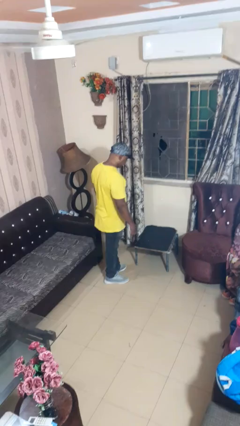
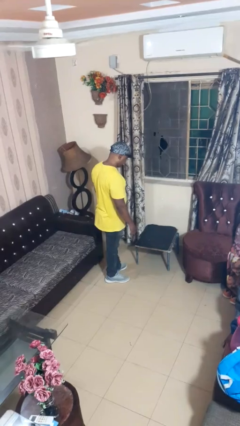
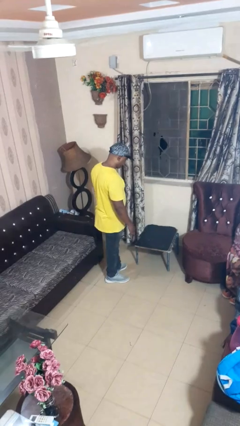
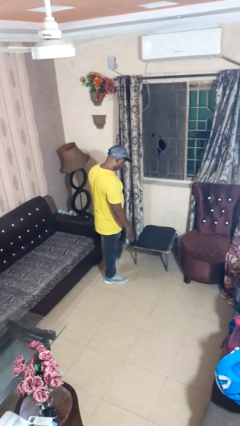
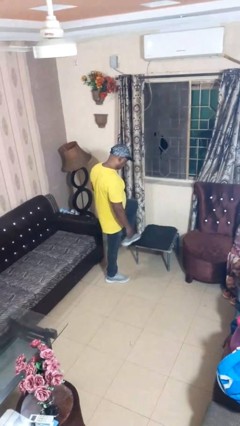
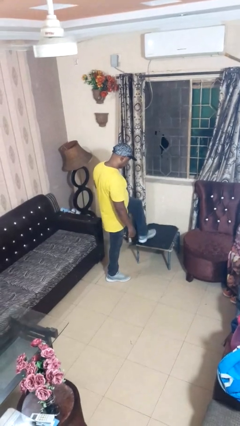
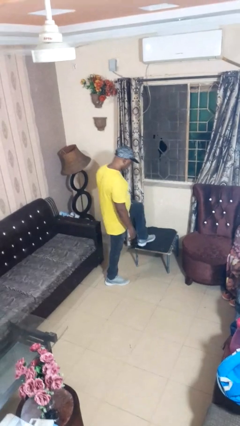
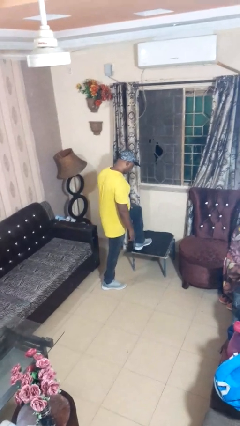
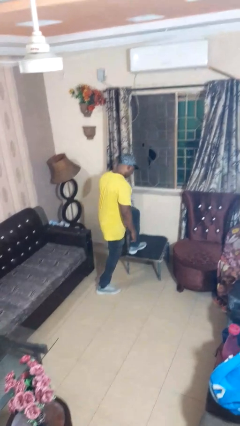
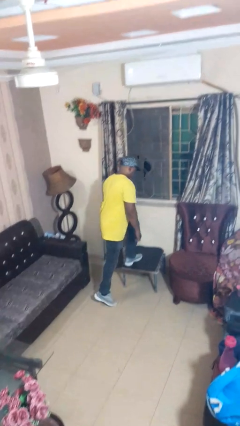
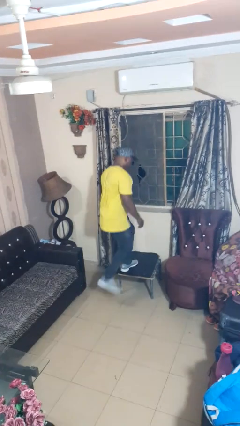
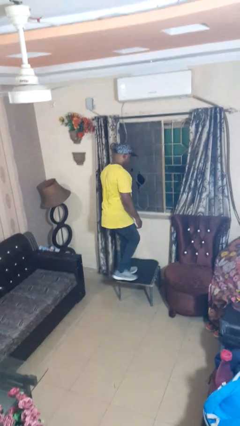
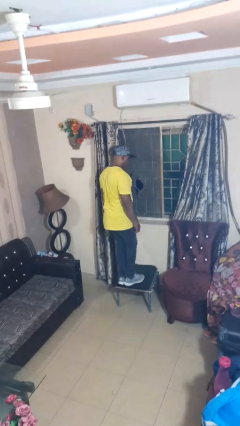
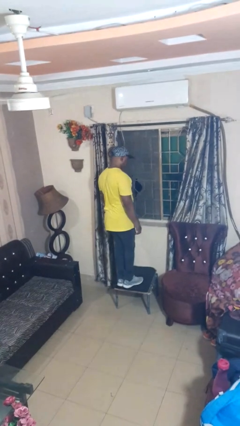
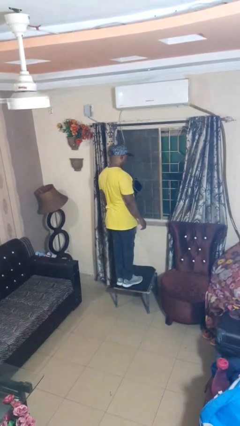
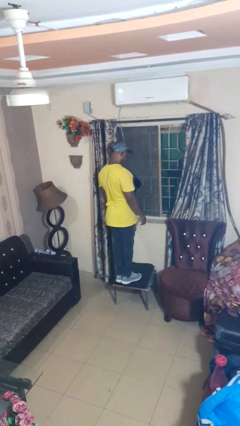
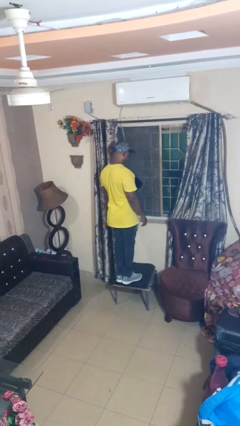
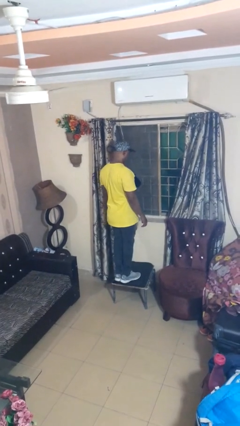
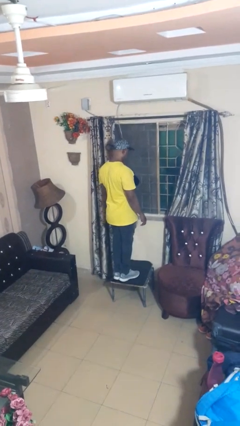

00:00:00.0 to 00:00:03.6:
person climbs on table

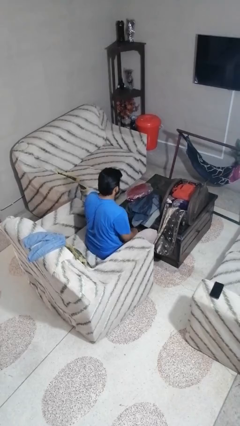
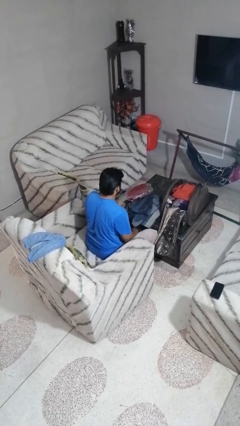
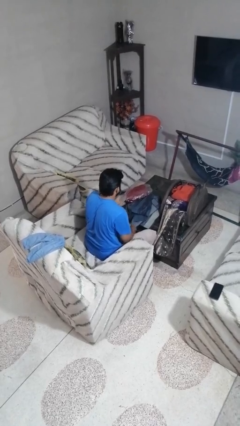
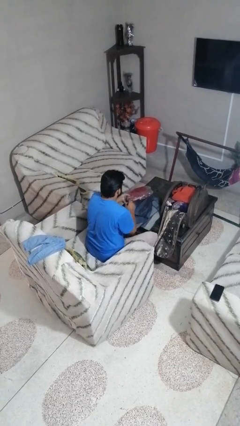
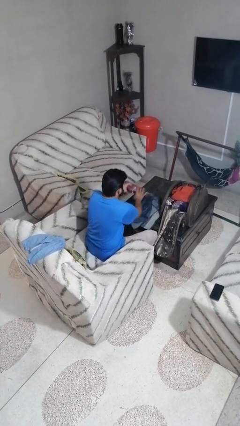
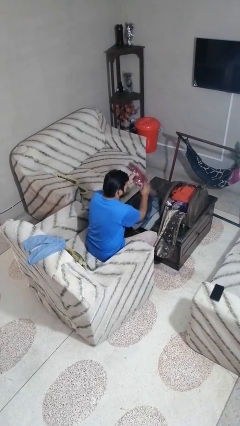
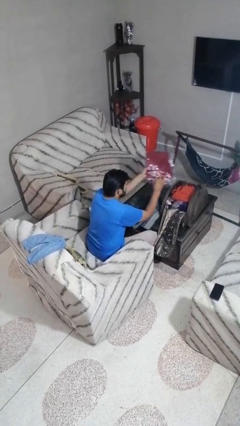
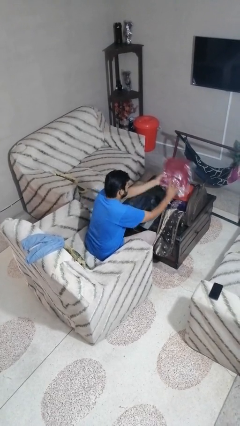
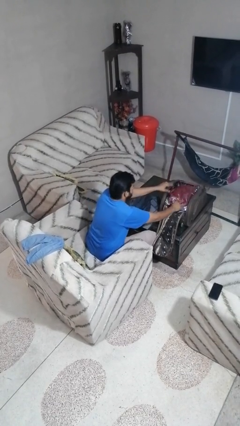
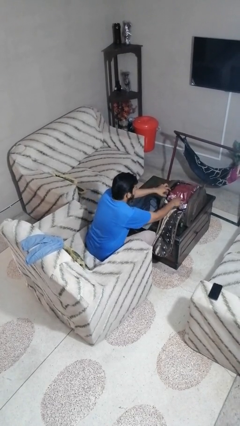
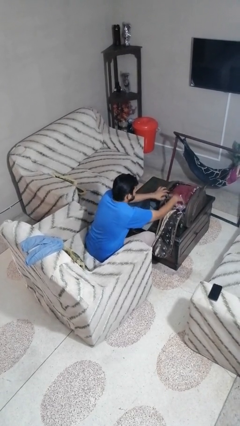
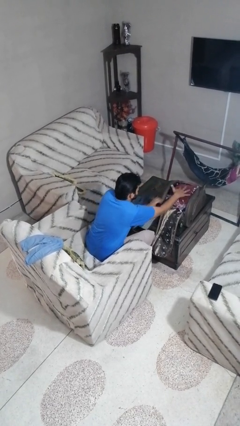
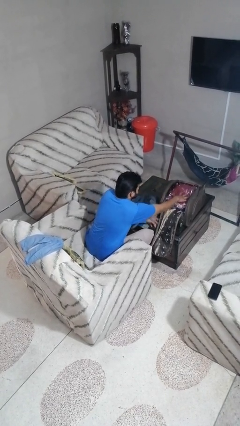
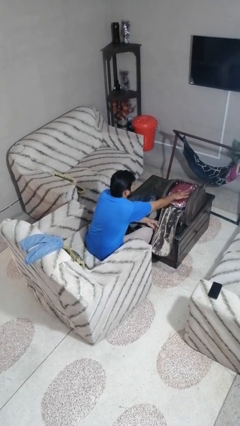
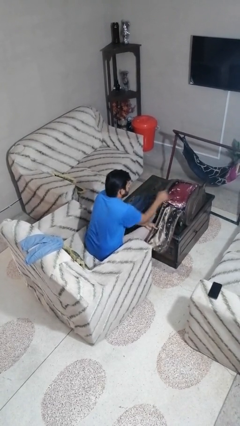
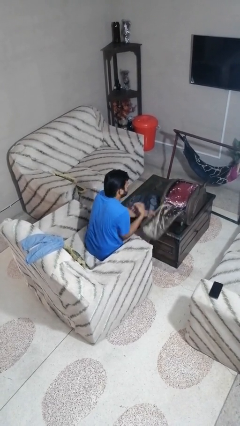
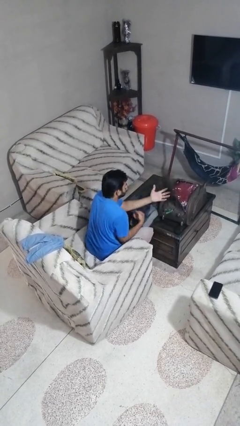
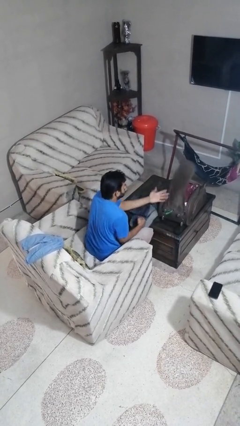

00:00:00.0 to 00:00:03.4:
person loads clothes into suitcase

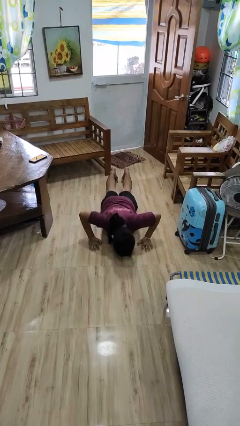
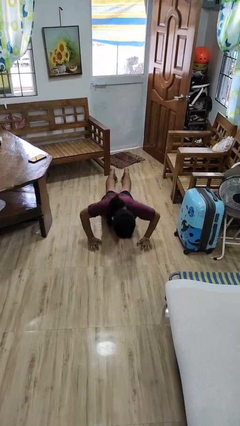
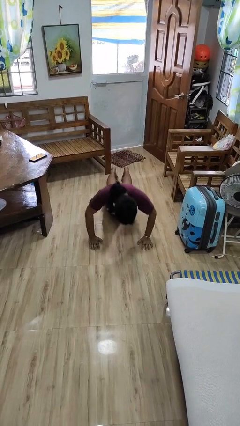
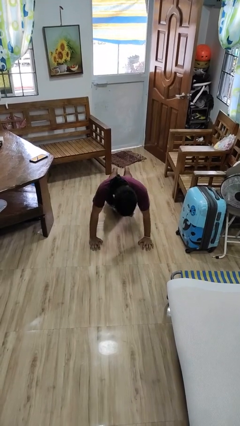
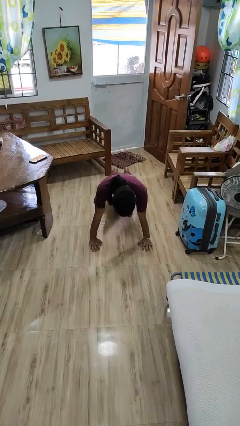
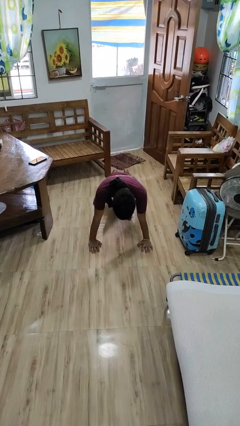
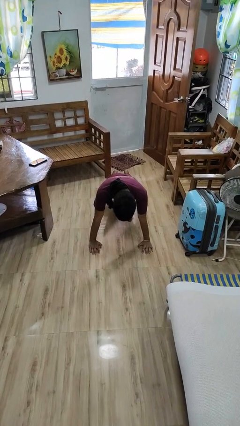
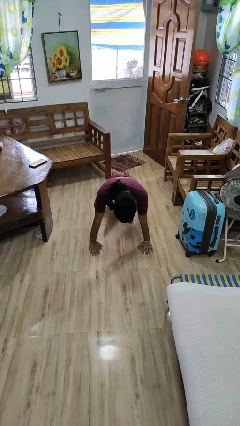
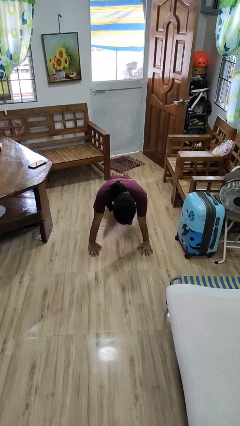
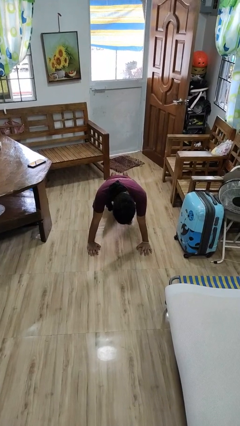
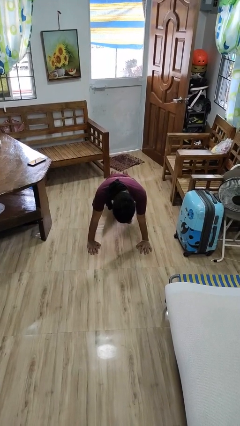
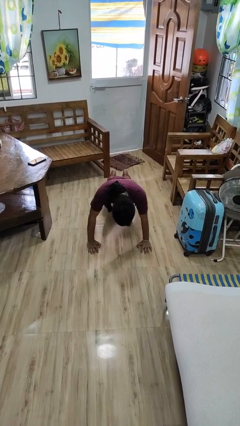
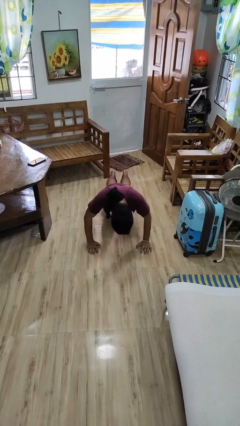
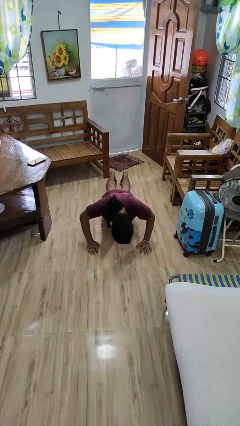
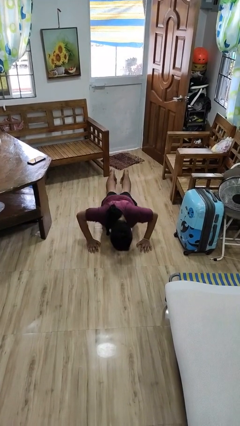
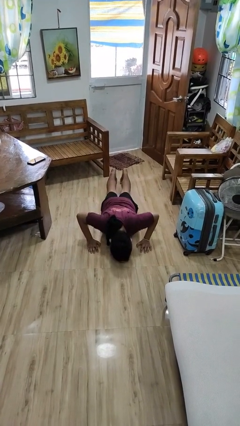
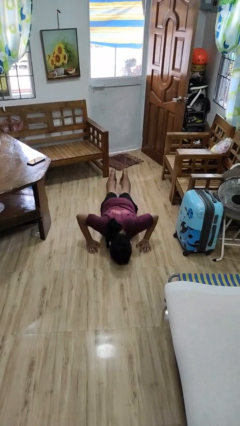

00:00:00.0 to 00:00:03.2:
person exercises with pushup

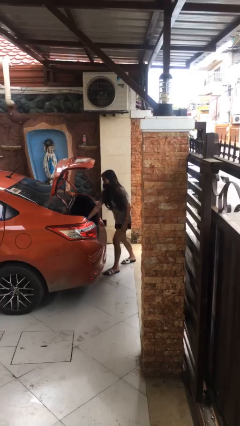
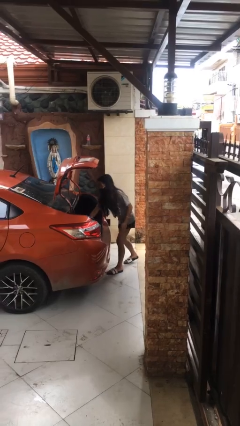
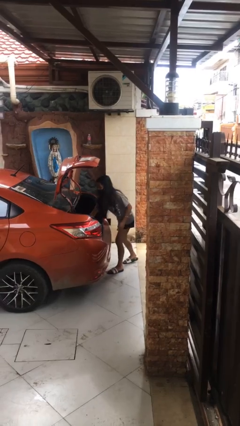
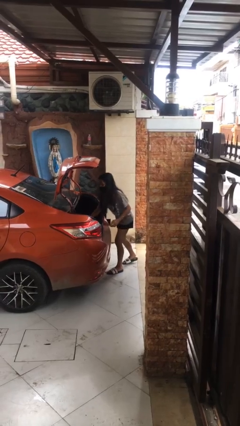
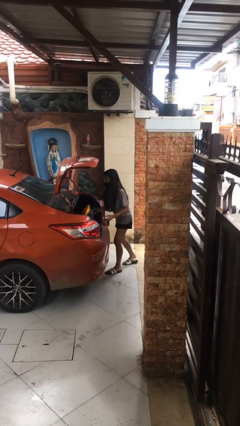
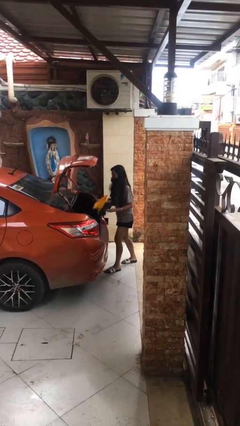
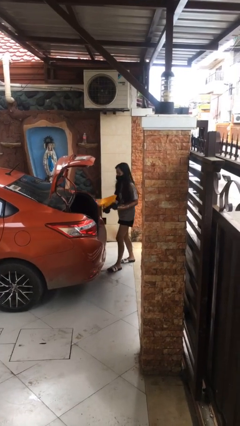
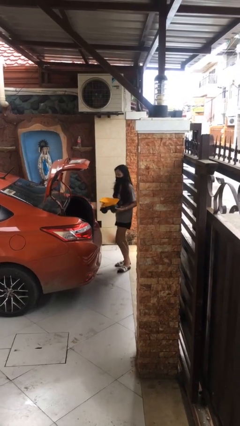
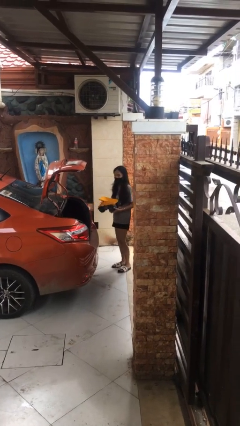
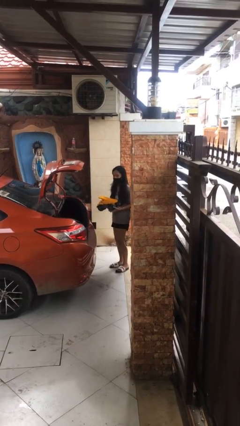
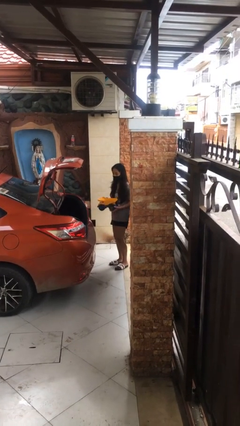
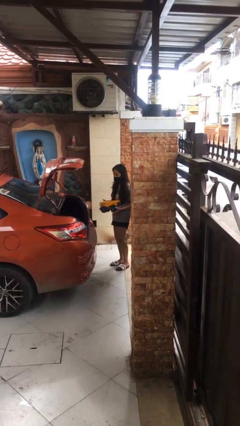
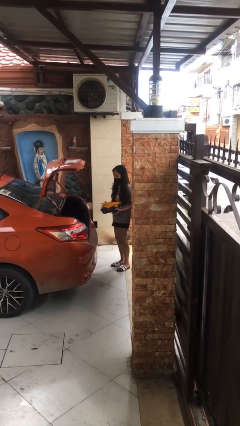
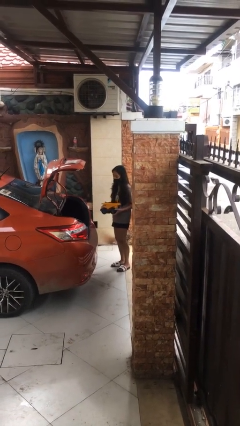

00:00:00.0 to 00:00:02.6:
person unloads car

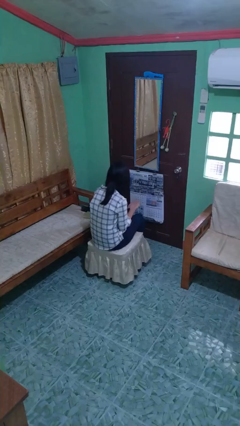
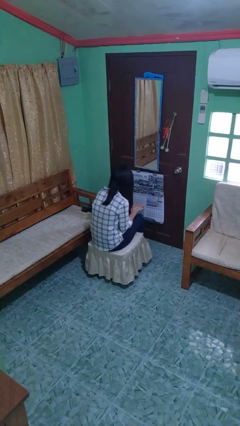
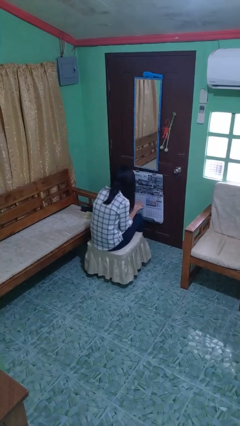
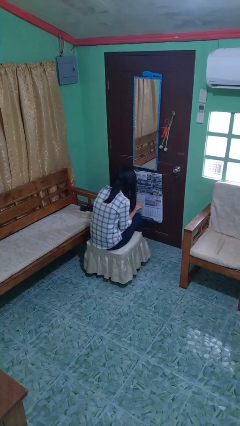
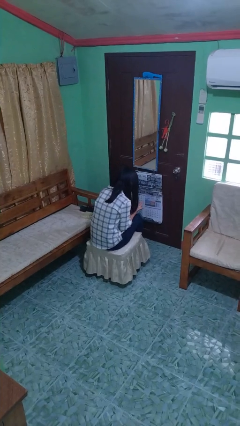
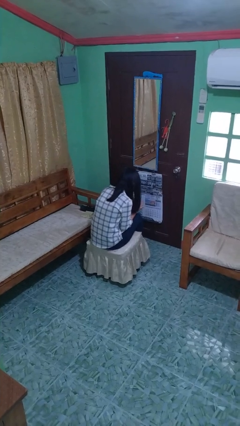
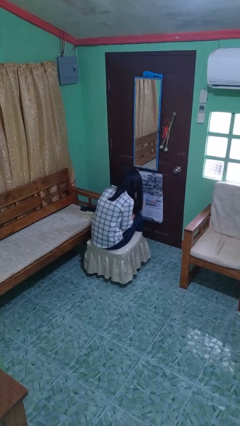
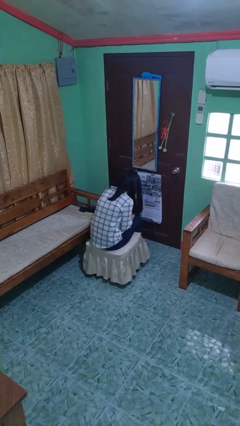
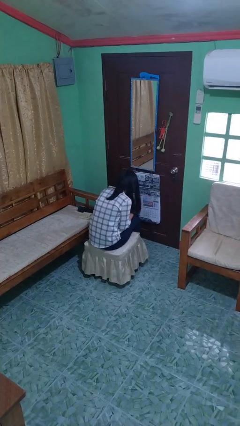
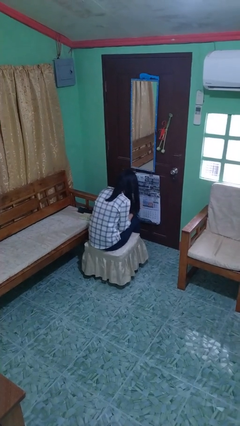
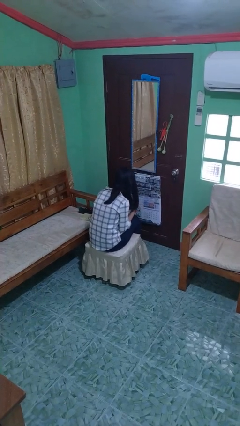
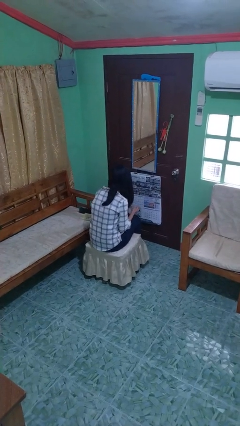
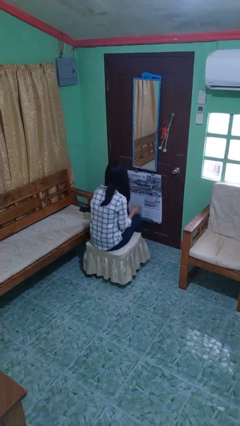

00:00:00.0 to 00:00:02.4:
person looks at hands in lap

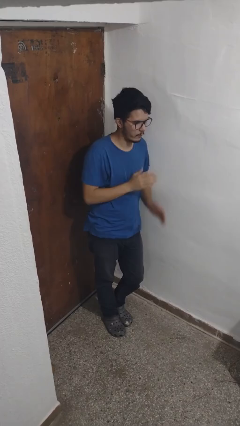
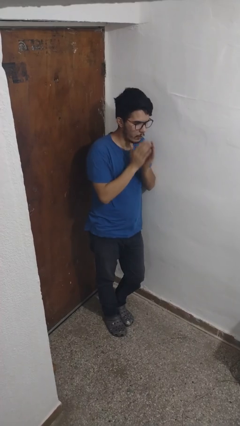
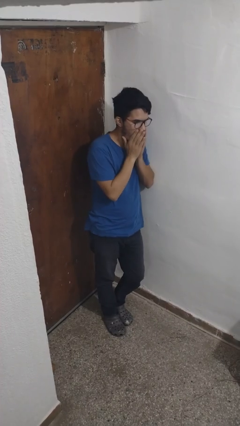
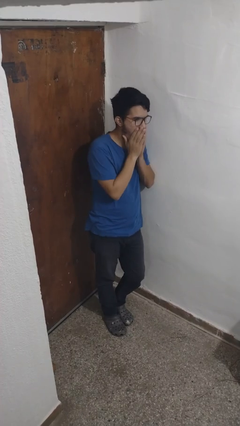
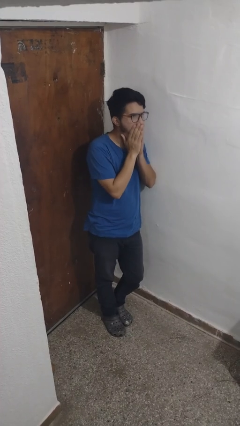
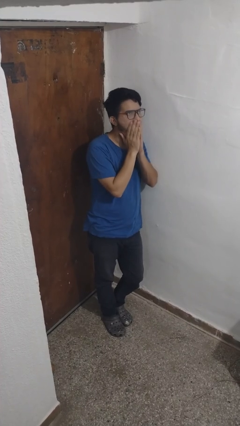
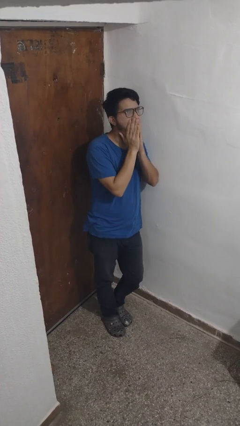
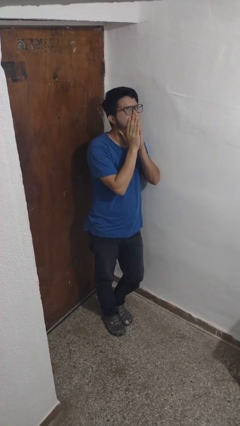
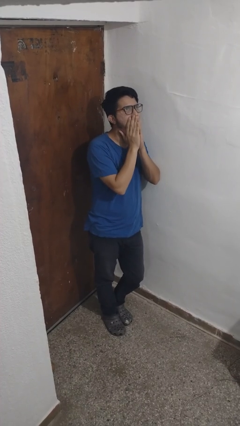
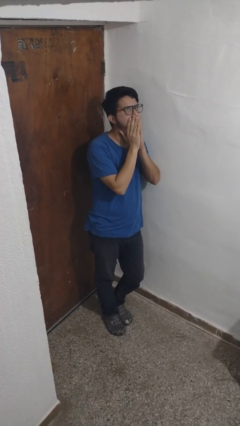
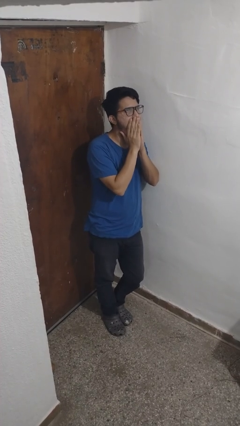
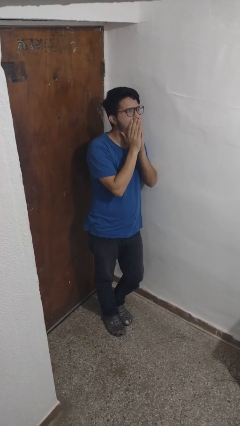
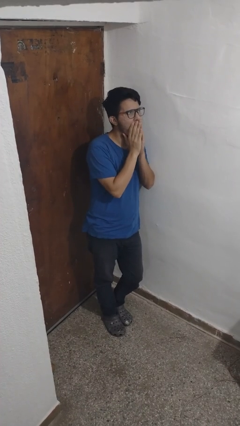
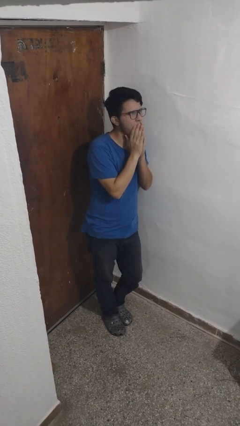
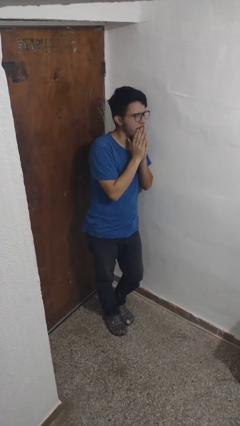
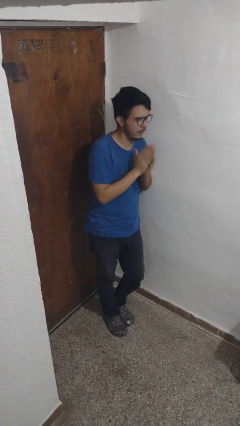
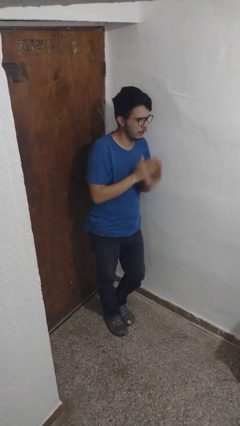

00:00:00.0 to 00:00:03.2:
person yawns
